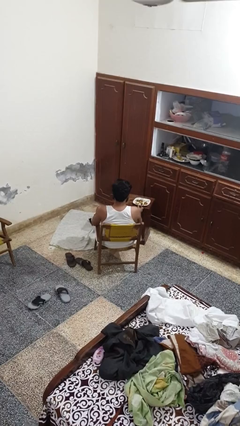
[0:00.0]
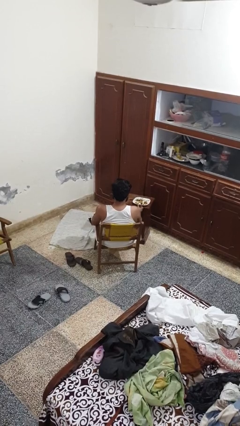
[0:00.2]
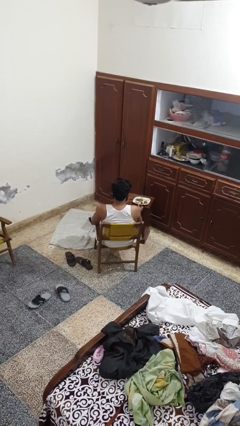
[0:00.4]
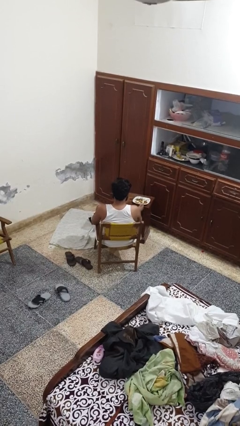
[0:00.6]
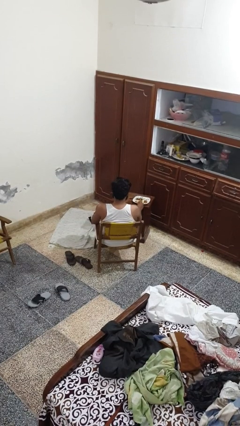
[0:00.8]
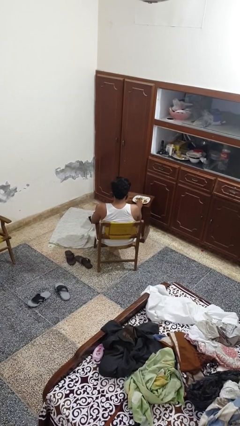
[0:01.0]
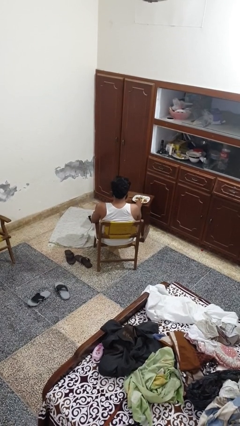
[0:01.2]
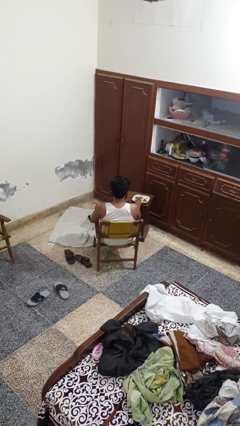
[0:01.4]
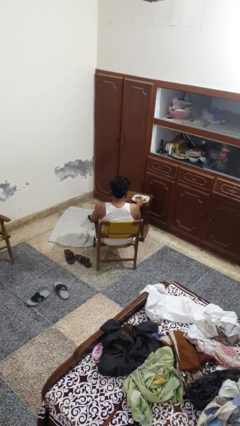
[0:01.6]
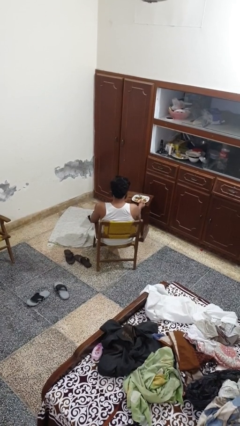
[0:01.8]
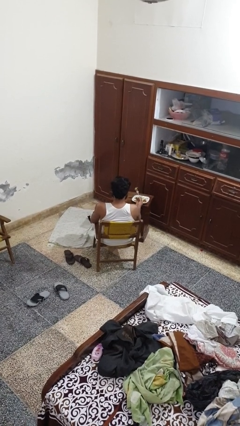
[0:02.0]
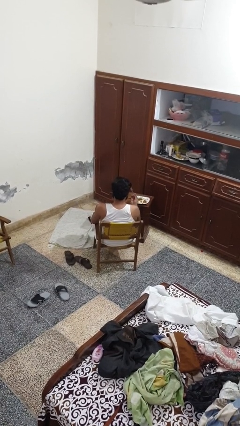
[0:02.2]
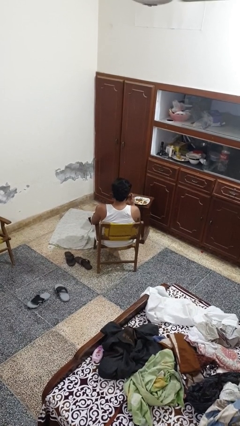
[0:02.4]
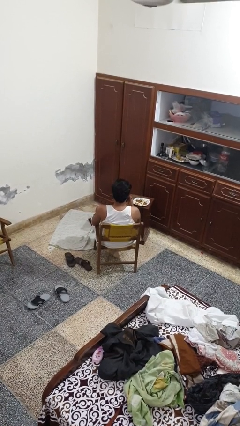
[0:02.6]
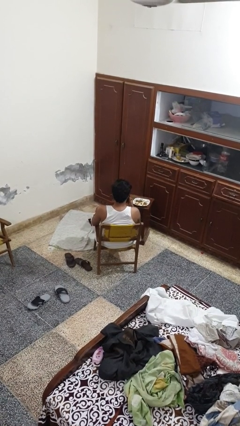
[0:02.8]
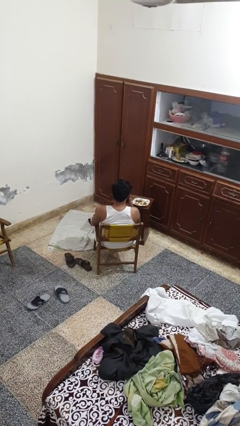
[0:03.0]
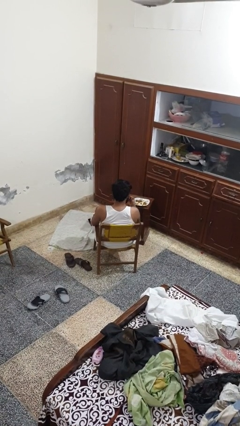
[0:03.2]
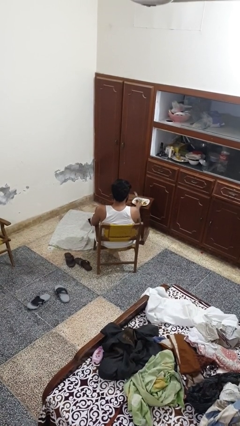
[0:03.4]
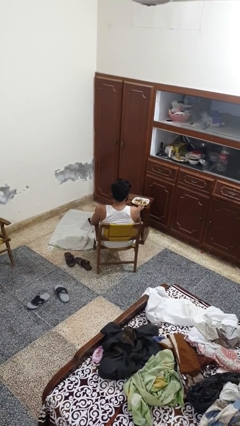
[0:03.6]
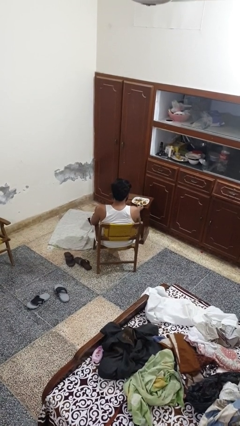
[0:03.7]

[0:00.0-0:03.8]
person eats with utensil

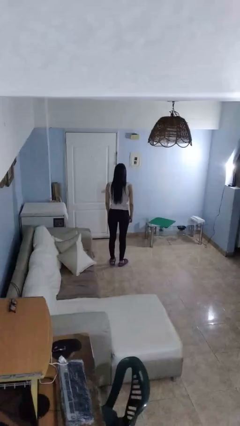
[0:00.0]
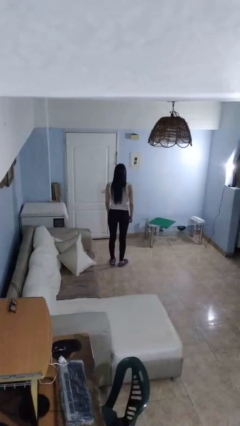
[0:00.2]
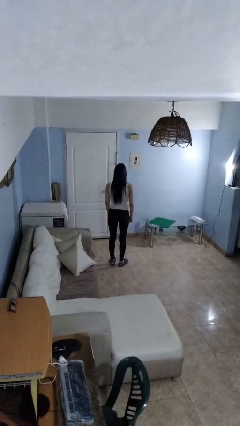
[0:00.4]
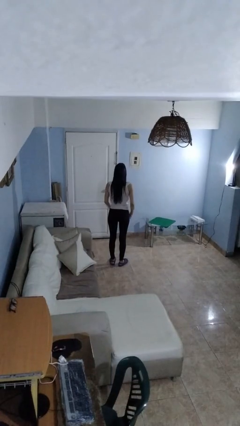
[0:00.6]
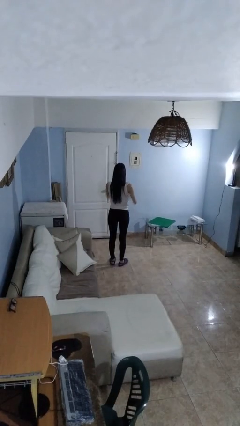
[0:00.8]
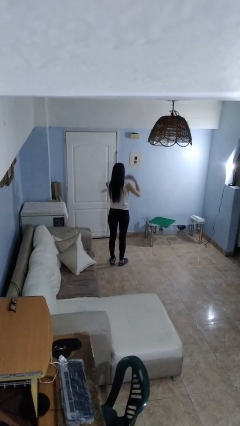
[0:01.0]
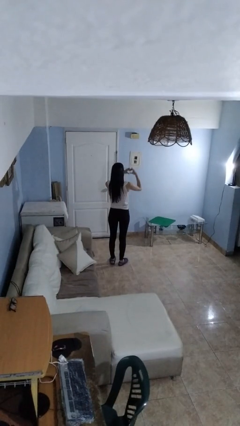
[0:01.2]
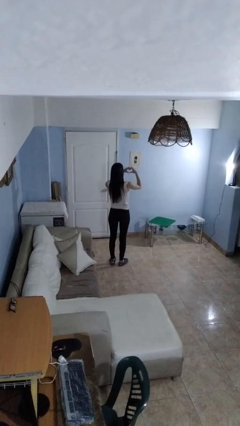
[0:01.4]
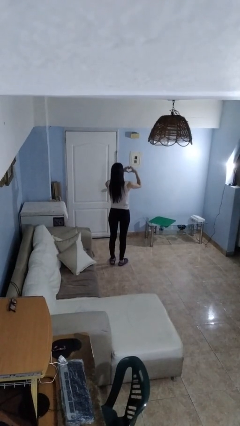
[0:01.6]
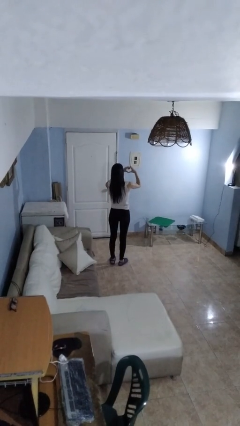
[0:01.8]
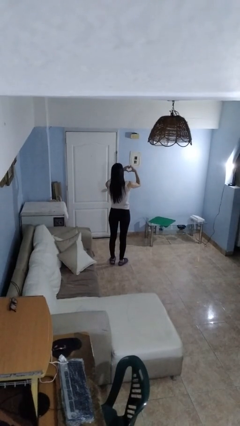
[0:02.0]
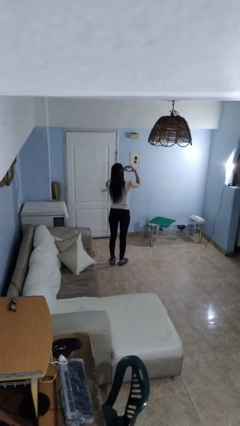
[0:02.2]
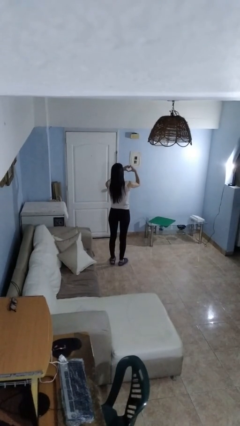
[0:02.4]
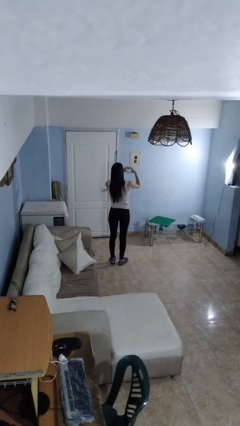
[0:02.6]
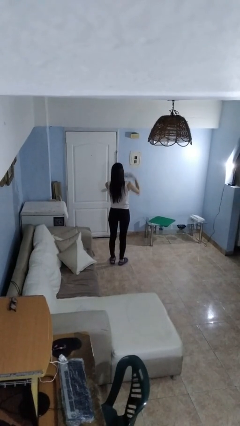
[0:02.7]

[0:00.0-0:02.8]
person gestures heart

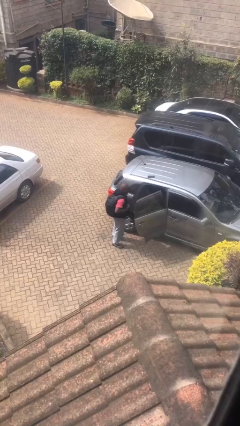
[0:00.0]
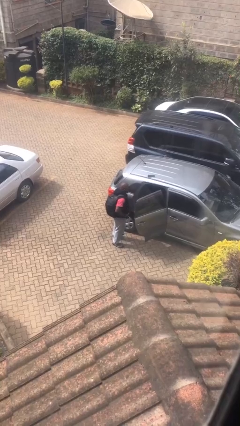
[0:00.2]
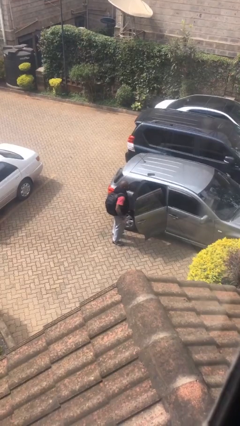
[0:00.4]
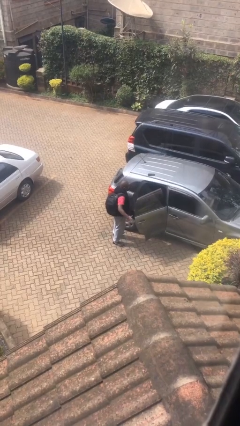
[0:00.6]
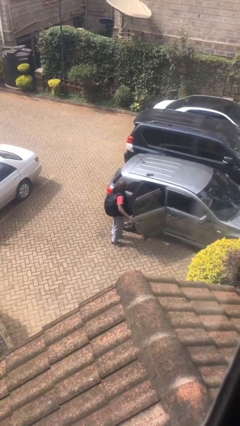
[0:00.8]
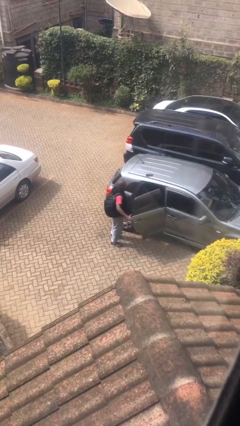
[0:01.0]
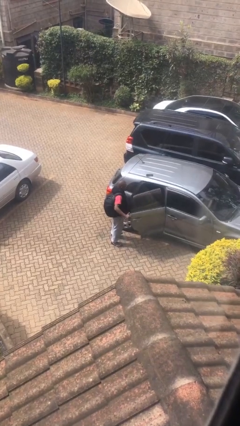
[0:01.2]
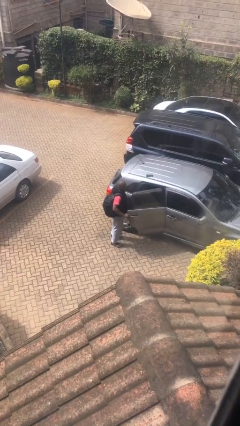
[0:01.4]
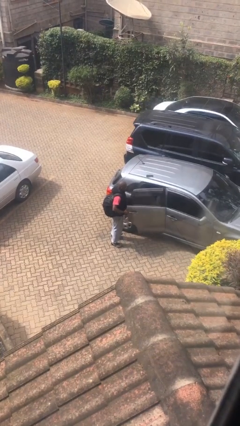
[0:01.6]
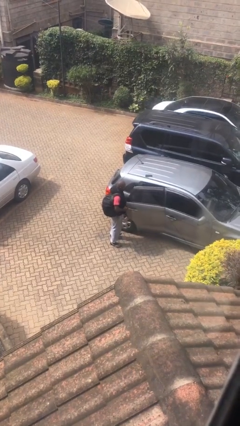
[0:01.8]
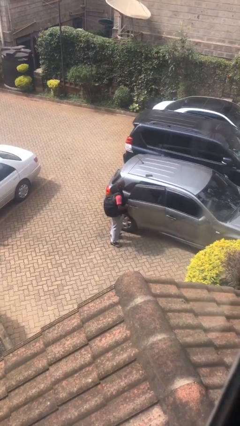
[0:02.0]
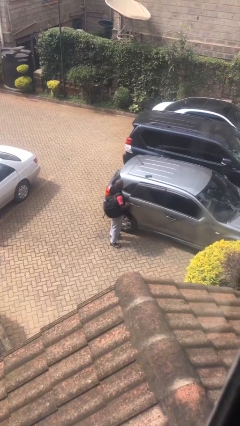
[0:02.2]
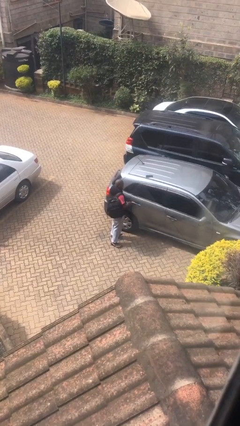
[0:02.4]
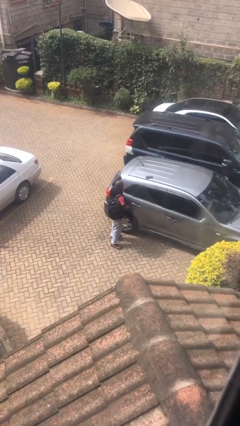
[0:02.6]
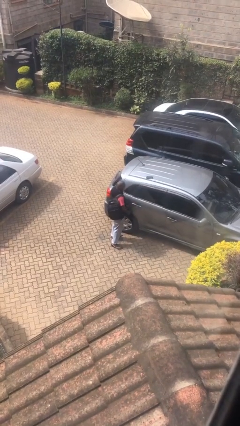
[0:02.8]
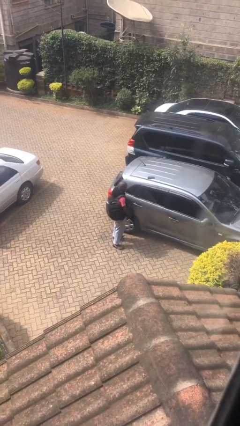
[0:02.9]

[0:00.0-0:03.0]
person closes car door

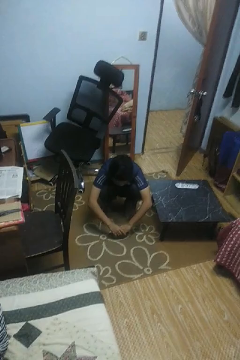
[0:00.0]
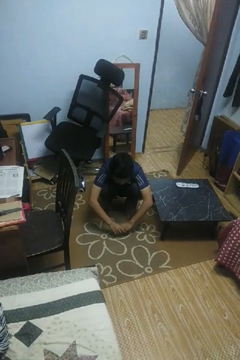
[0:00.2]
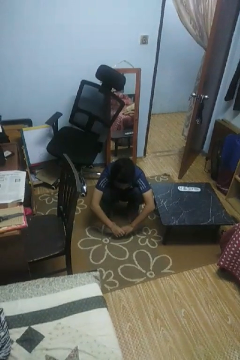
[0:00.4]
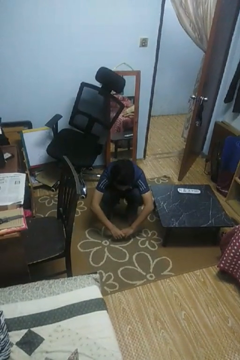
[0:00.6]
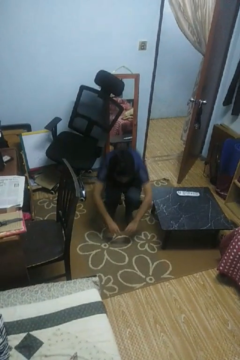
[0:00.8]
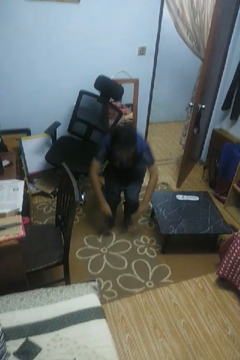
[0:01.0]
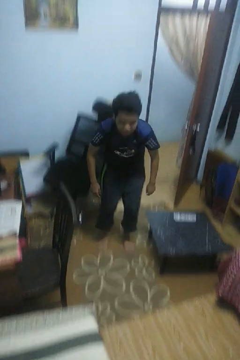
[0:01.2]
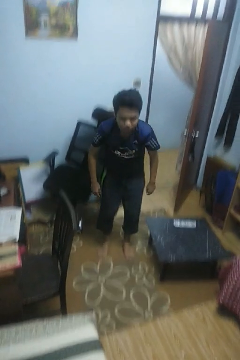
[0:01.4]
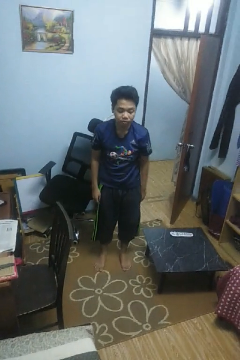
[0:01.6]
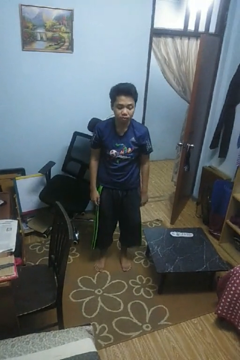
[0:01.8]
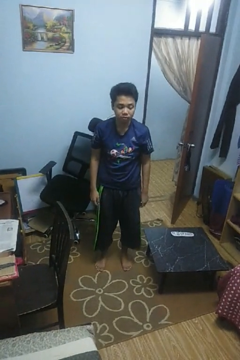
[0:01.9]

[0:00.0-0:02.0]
person stands up

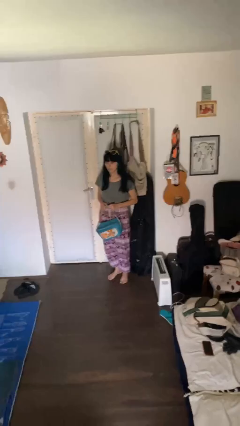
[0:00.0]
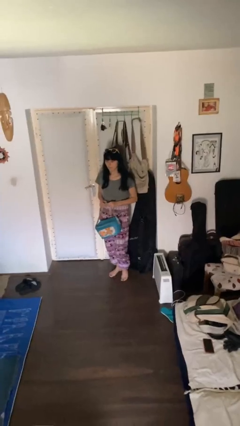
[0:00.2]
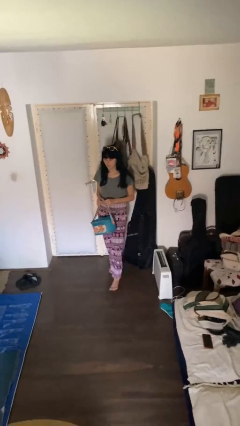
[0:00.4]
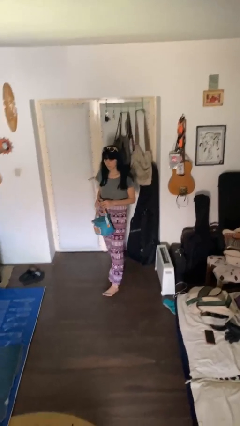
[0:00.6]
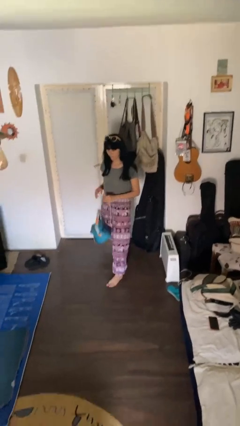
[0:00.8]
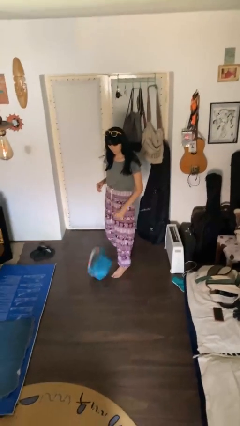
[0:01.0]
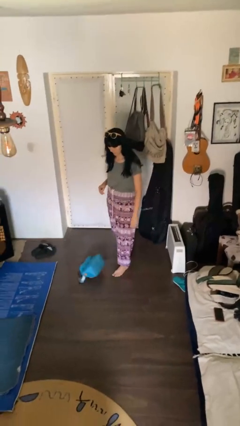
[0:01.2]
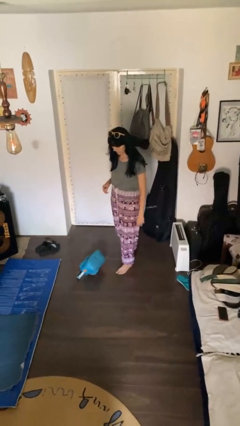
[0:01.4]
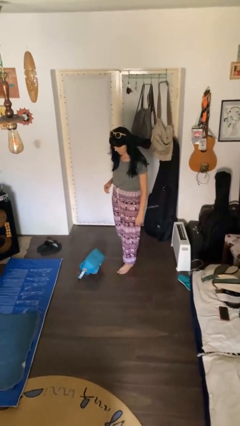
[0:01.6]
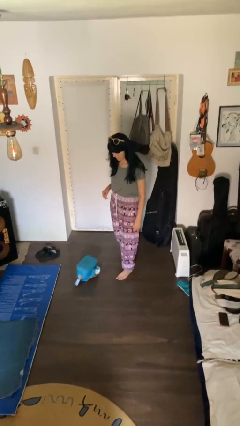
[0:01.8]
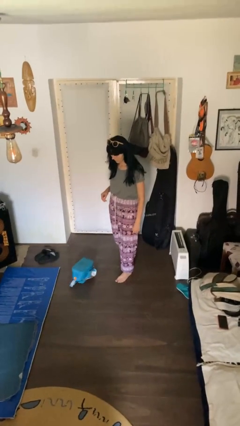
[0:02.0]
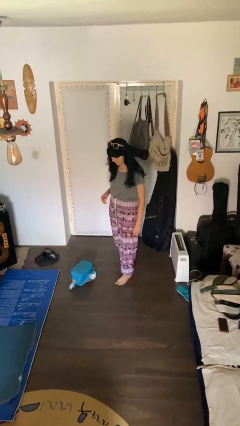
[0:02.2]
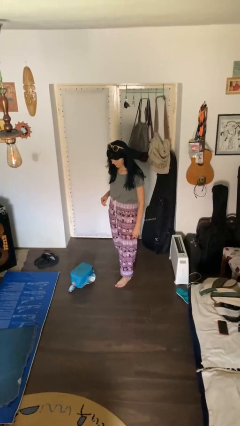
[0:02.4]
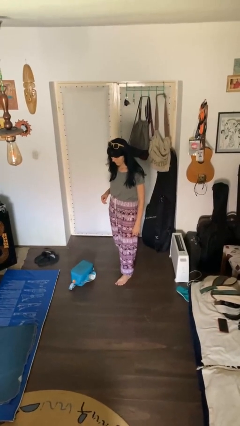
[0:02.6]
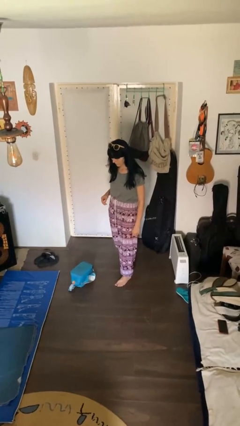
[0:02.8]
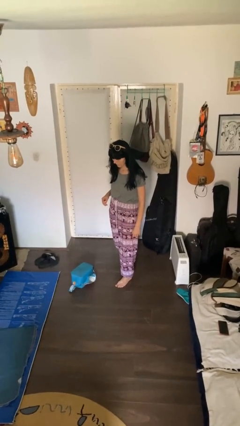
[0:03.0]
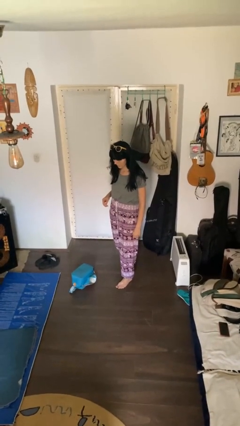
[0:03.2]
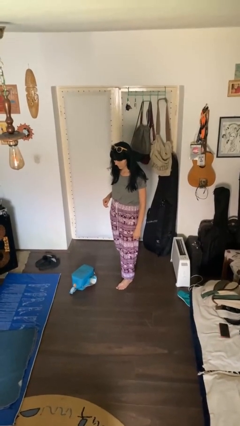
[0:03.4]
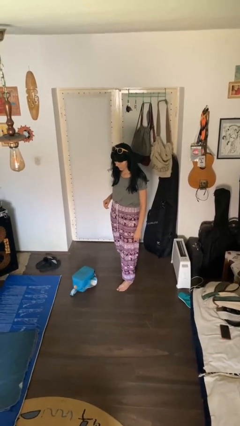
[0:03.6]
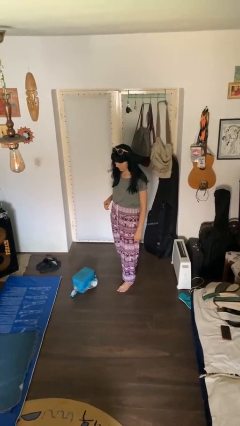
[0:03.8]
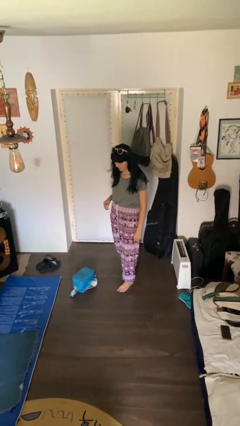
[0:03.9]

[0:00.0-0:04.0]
person drops object

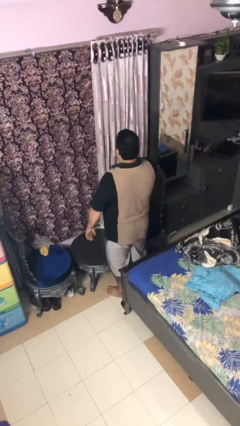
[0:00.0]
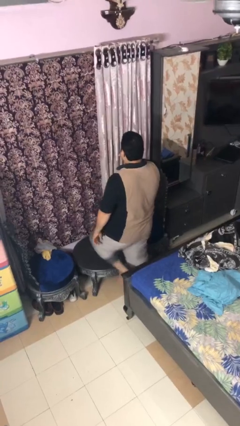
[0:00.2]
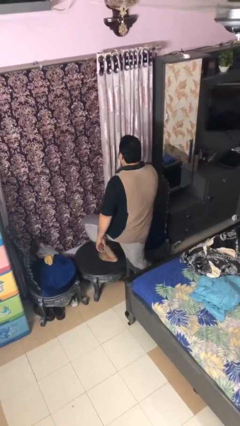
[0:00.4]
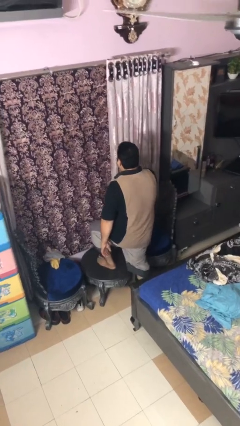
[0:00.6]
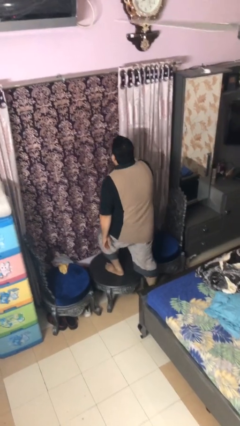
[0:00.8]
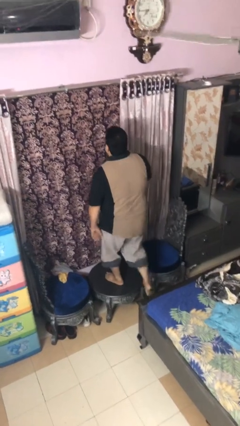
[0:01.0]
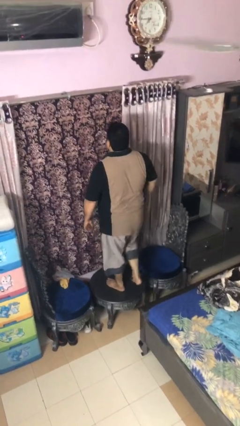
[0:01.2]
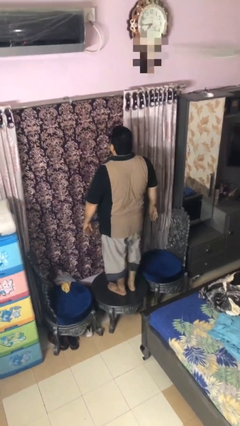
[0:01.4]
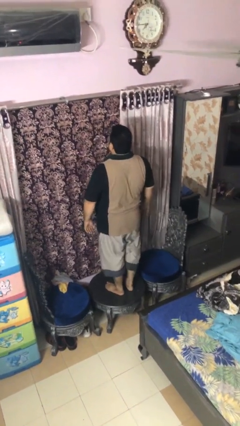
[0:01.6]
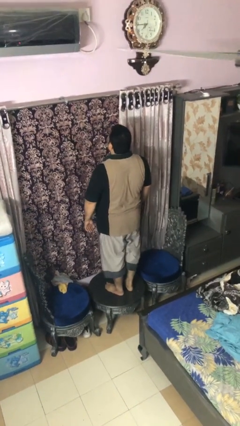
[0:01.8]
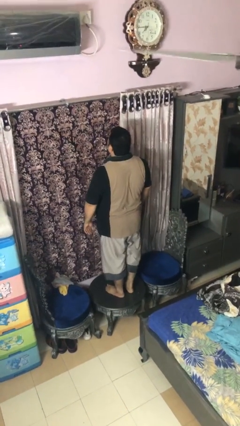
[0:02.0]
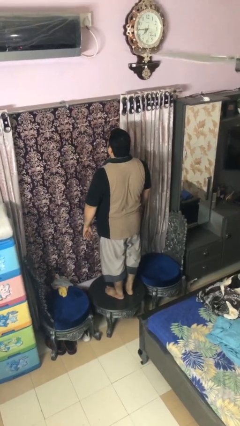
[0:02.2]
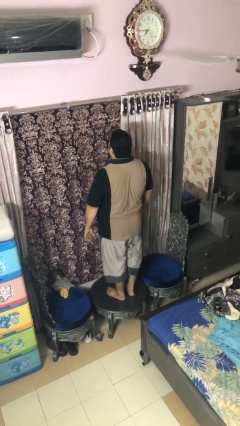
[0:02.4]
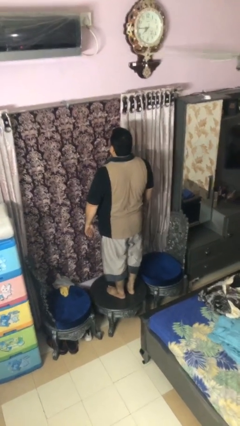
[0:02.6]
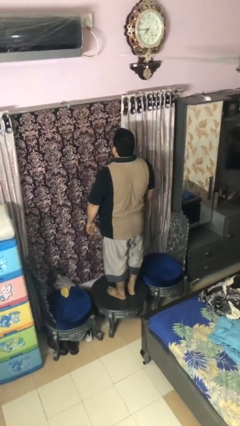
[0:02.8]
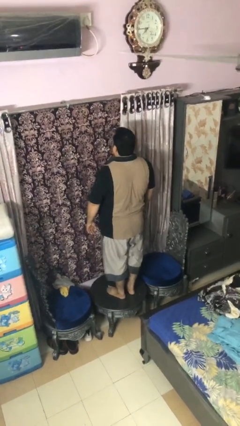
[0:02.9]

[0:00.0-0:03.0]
person climbs on table
